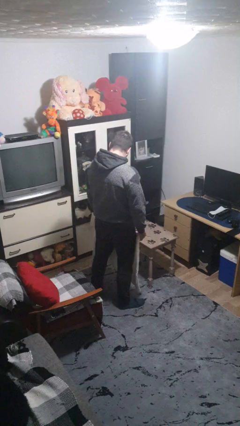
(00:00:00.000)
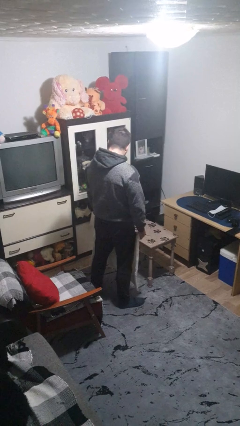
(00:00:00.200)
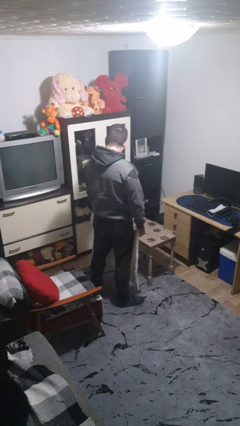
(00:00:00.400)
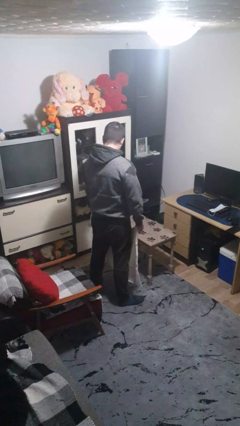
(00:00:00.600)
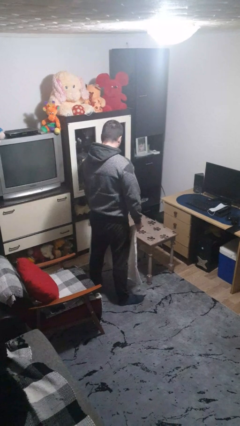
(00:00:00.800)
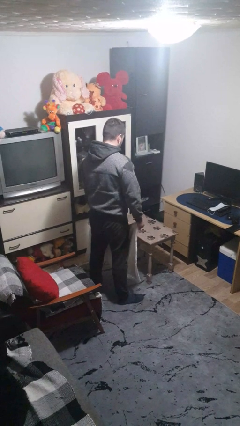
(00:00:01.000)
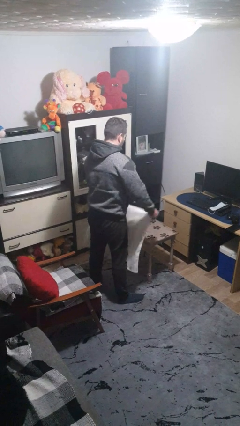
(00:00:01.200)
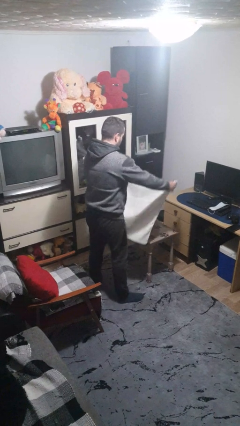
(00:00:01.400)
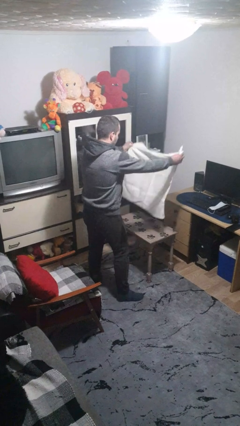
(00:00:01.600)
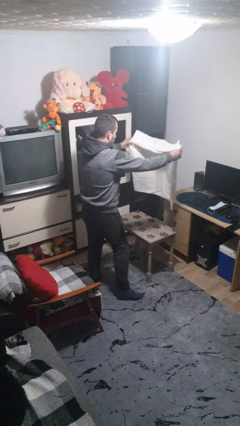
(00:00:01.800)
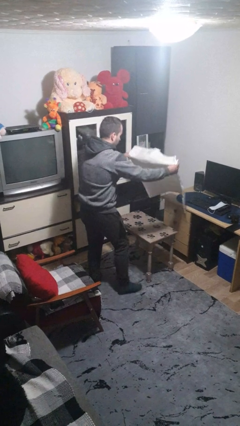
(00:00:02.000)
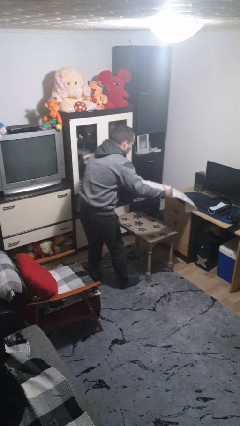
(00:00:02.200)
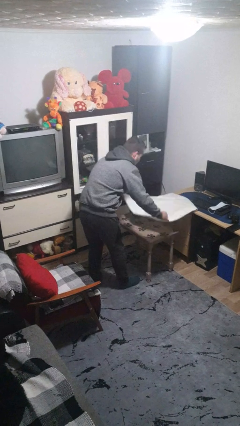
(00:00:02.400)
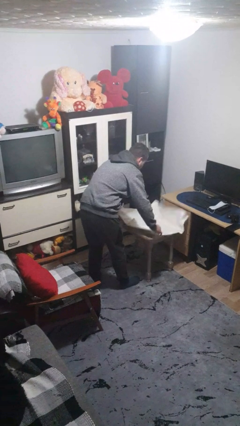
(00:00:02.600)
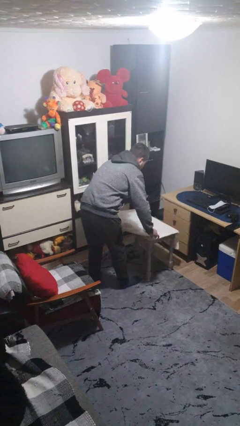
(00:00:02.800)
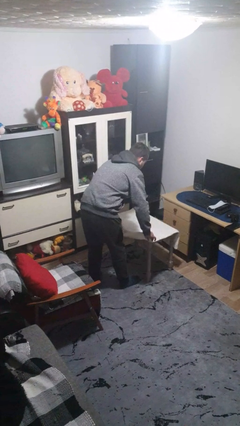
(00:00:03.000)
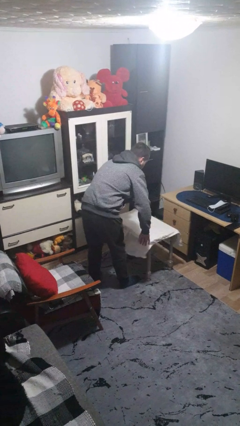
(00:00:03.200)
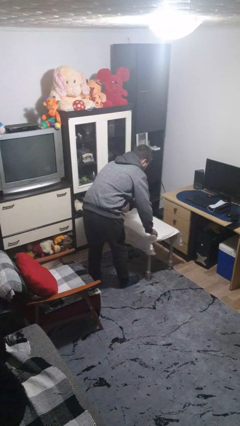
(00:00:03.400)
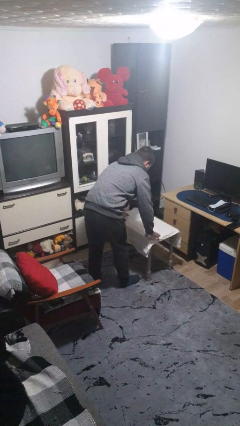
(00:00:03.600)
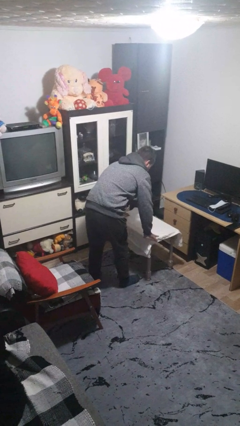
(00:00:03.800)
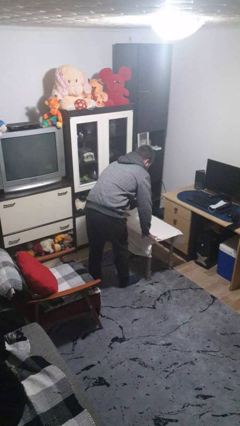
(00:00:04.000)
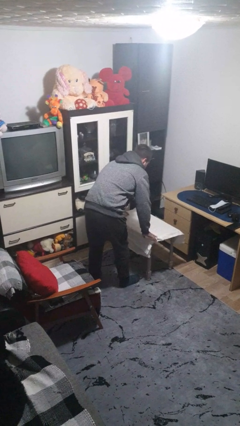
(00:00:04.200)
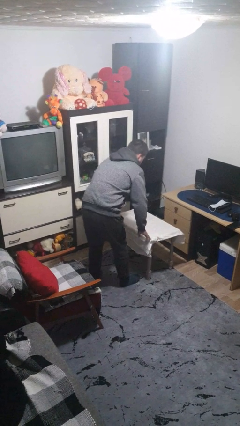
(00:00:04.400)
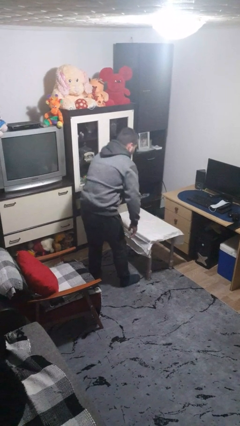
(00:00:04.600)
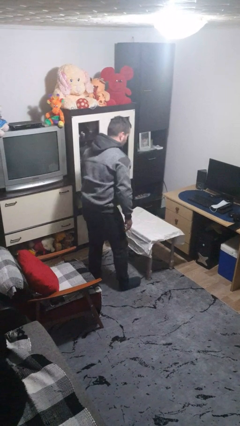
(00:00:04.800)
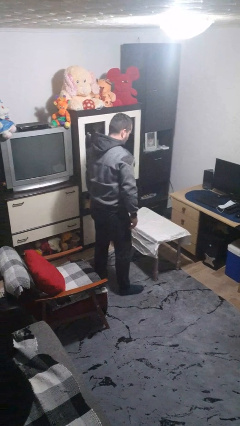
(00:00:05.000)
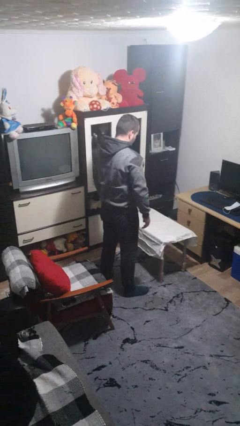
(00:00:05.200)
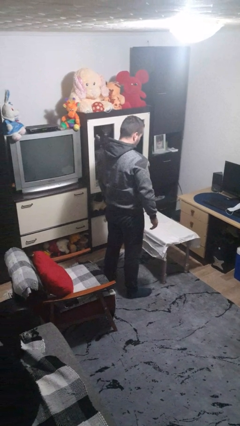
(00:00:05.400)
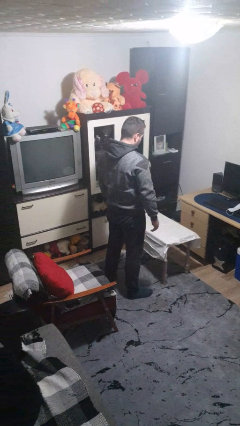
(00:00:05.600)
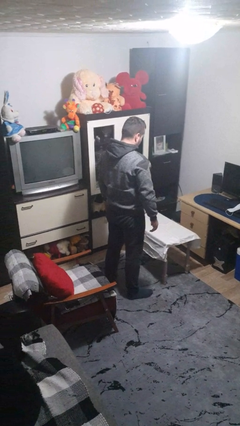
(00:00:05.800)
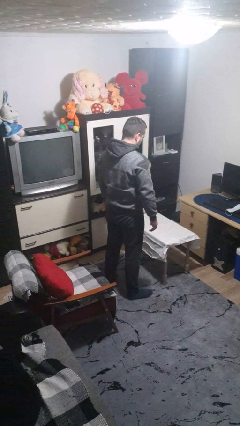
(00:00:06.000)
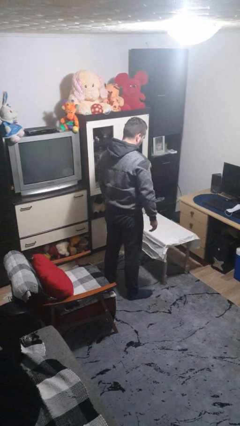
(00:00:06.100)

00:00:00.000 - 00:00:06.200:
person spreads tablecloth

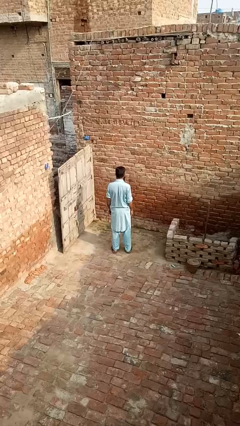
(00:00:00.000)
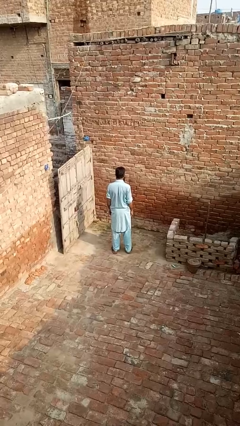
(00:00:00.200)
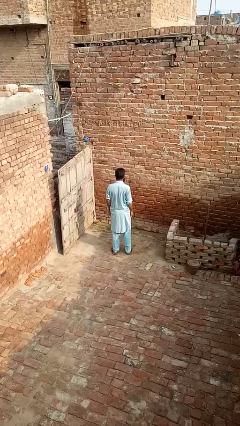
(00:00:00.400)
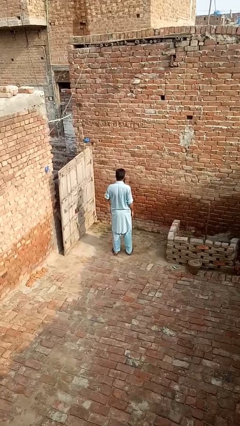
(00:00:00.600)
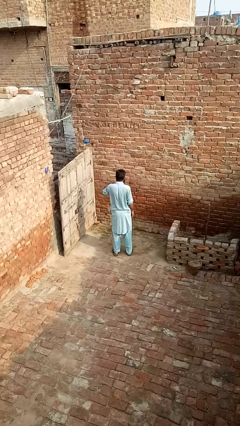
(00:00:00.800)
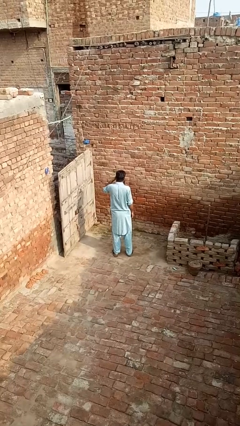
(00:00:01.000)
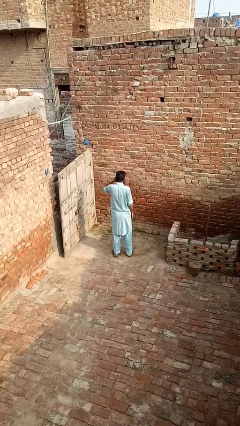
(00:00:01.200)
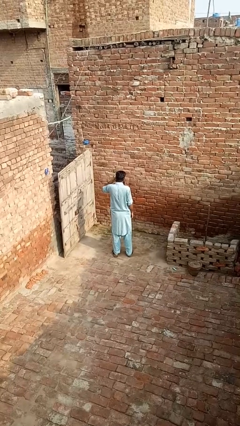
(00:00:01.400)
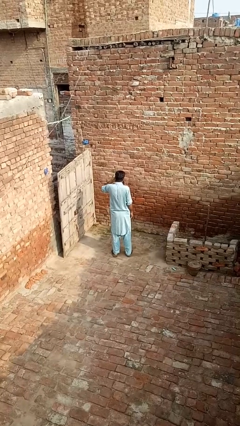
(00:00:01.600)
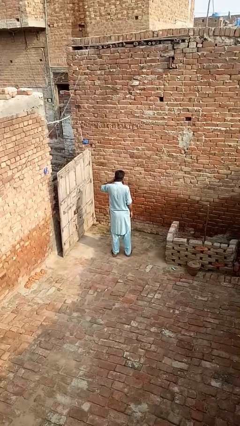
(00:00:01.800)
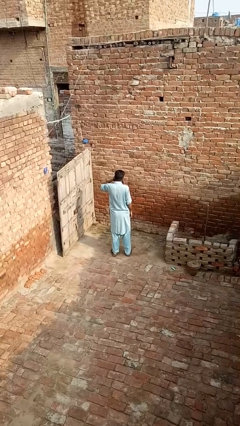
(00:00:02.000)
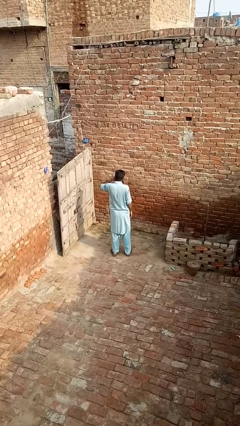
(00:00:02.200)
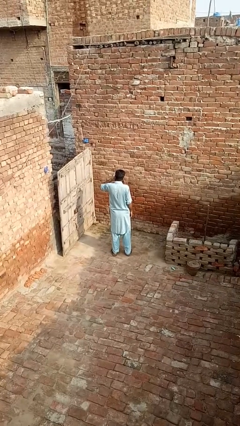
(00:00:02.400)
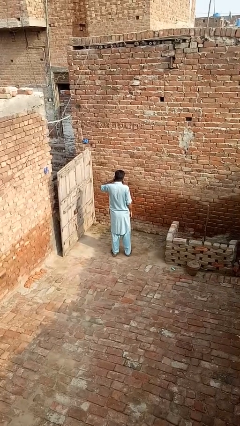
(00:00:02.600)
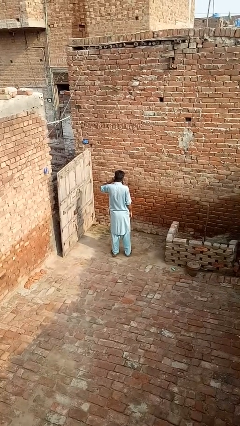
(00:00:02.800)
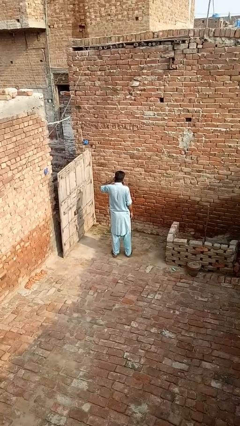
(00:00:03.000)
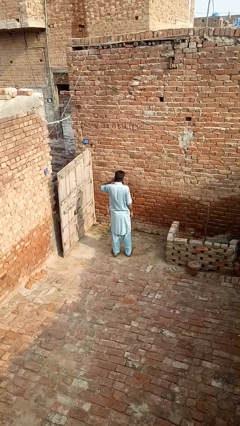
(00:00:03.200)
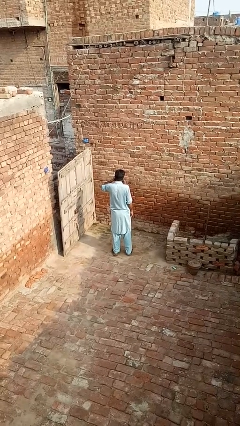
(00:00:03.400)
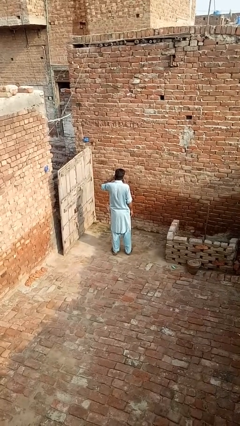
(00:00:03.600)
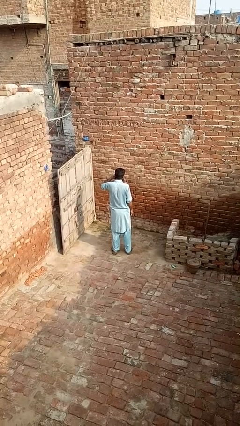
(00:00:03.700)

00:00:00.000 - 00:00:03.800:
person rubs eyes

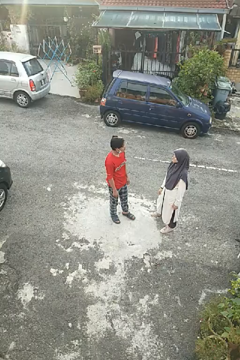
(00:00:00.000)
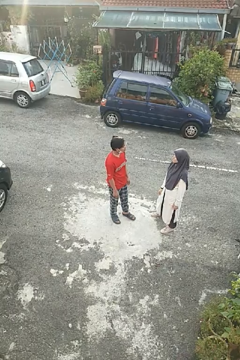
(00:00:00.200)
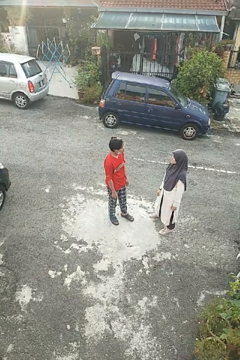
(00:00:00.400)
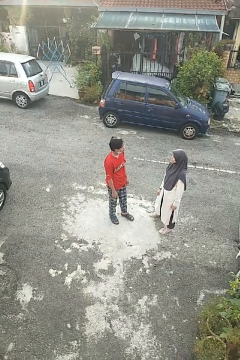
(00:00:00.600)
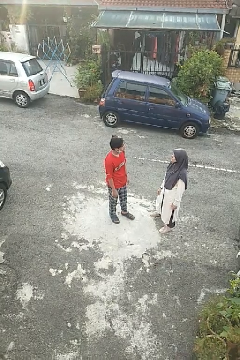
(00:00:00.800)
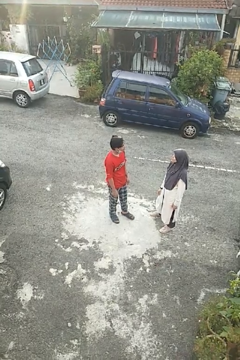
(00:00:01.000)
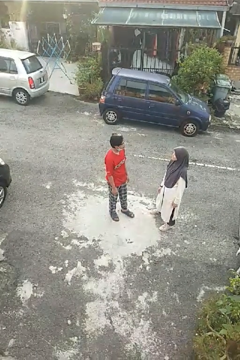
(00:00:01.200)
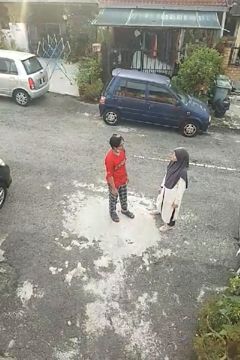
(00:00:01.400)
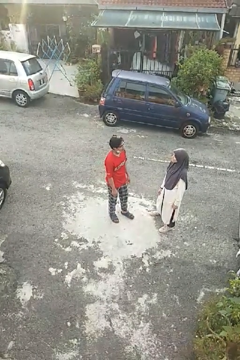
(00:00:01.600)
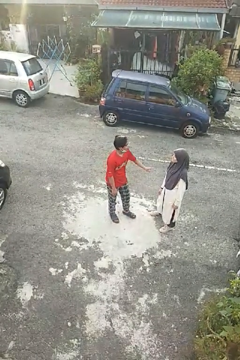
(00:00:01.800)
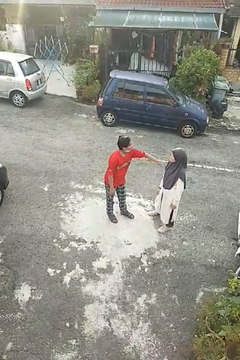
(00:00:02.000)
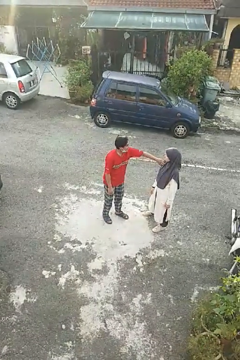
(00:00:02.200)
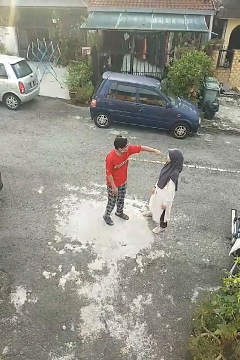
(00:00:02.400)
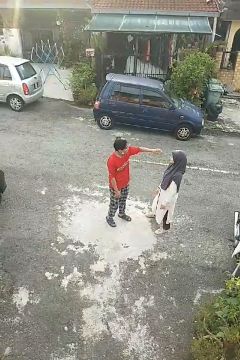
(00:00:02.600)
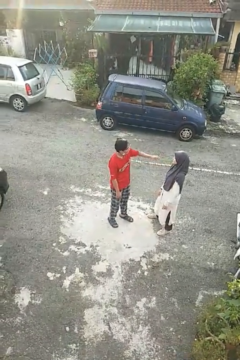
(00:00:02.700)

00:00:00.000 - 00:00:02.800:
person shoves person

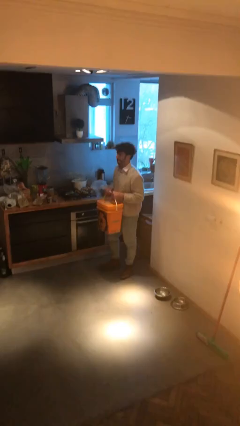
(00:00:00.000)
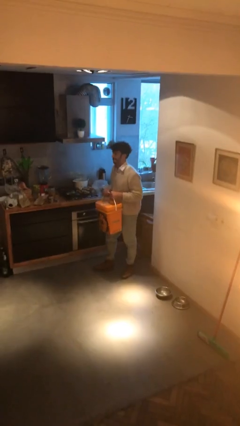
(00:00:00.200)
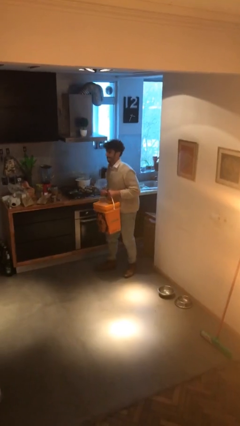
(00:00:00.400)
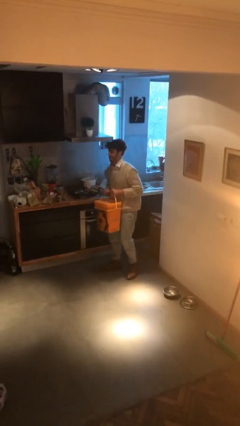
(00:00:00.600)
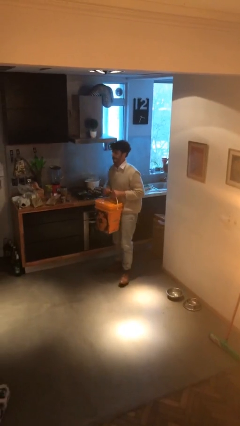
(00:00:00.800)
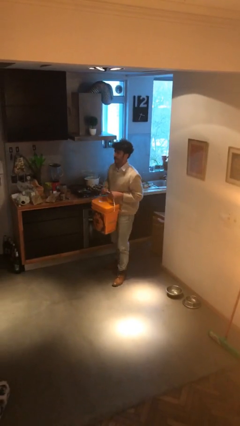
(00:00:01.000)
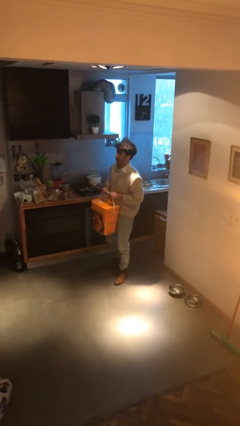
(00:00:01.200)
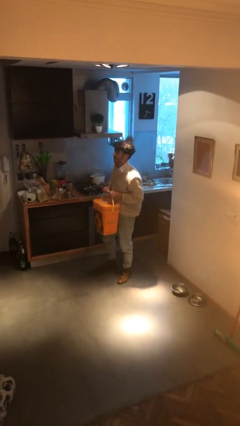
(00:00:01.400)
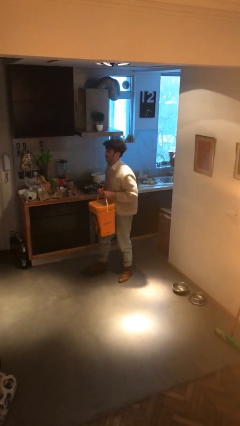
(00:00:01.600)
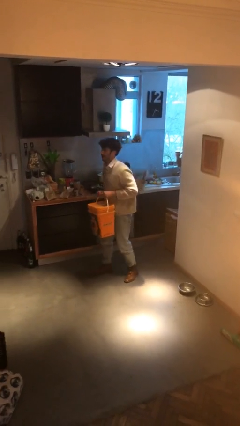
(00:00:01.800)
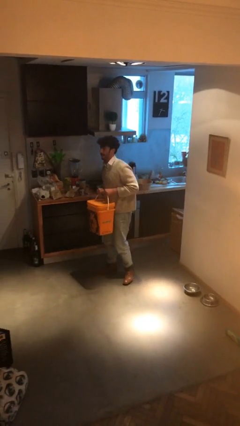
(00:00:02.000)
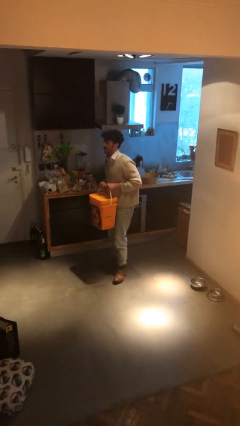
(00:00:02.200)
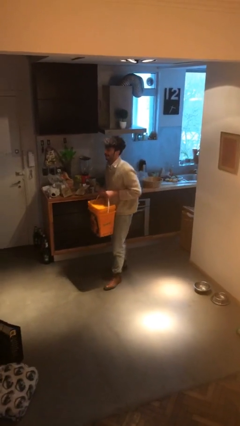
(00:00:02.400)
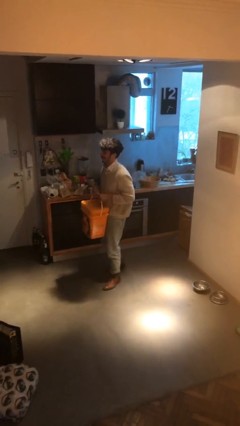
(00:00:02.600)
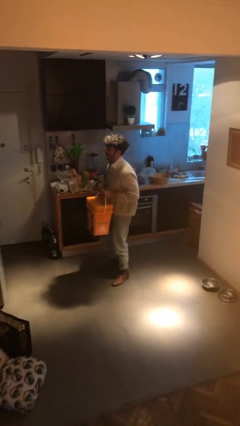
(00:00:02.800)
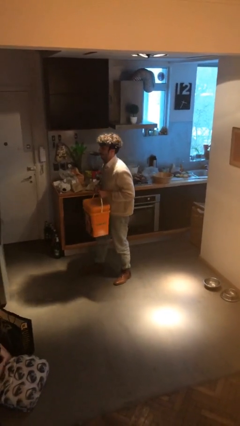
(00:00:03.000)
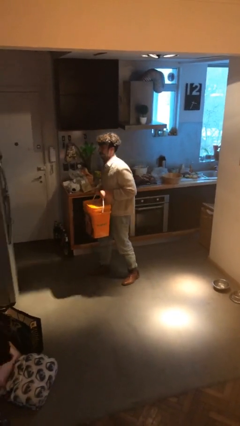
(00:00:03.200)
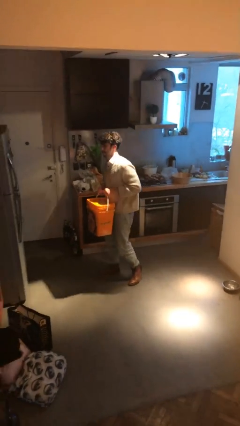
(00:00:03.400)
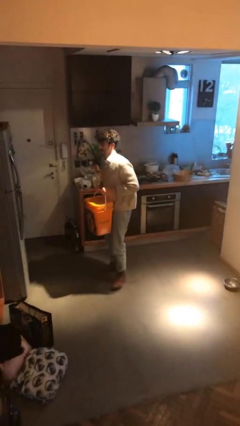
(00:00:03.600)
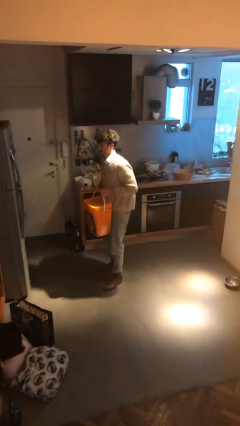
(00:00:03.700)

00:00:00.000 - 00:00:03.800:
person carries heavy object

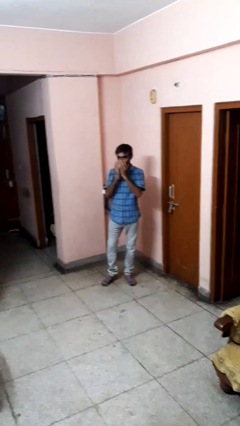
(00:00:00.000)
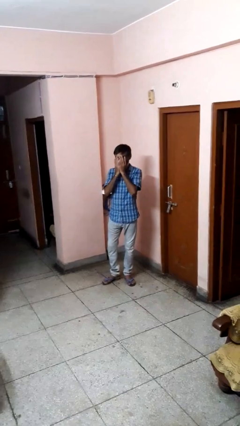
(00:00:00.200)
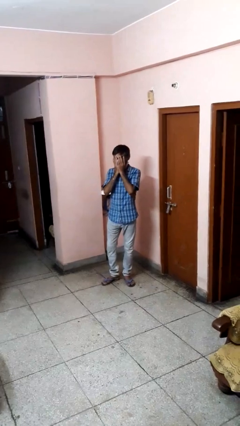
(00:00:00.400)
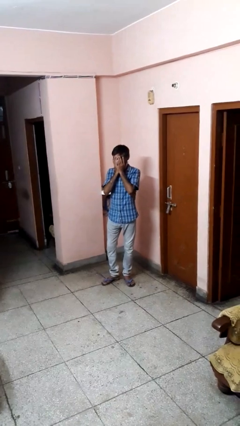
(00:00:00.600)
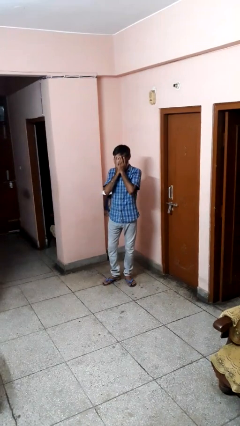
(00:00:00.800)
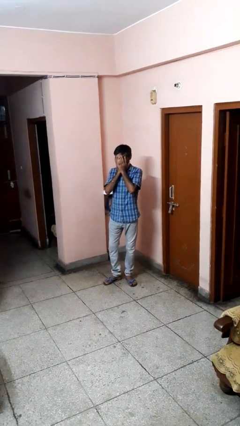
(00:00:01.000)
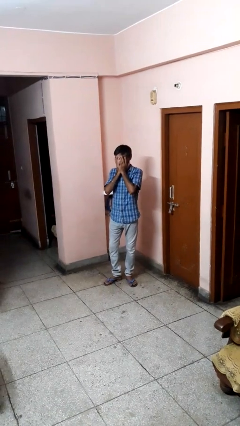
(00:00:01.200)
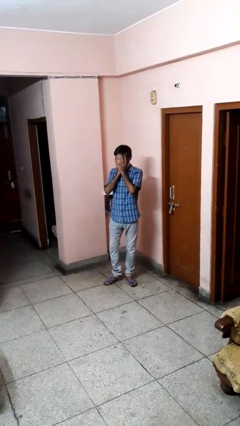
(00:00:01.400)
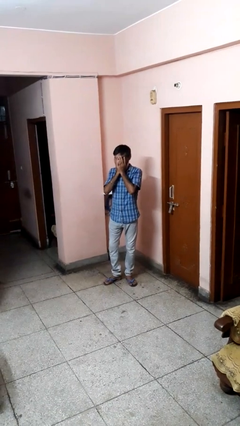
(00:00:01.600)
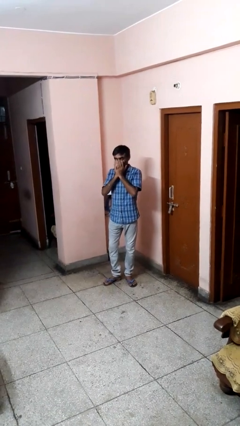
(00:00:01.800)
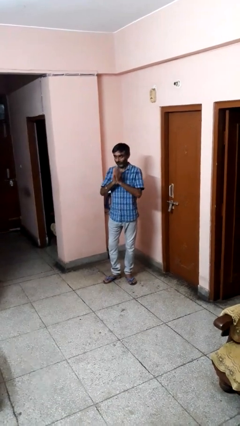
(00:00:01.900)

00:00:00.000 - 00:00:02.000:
person covers face with hands
